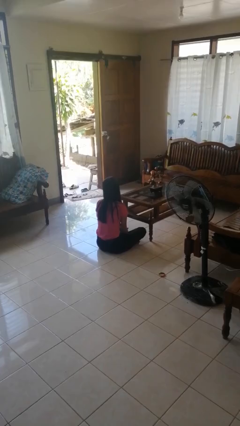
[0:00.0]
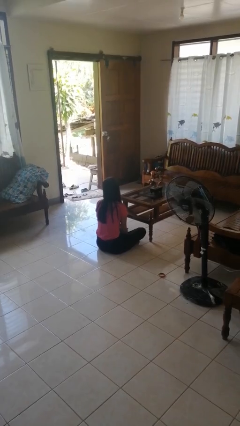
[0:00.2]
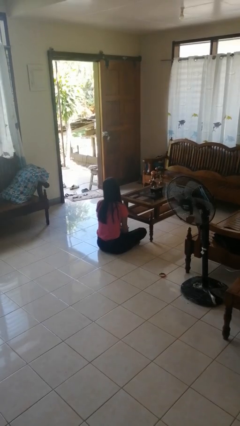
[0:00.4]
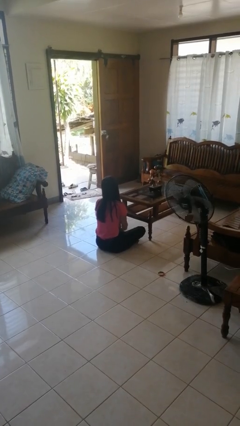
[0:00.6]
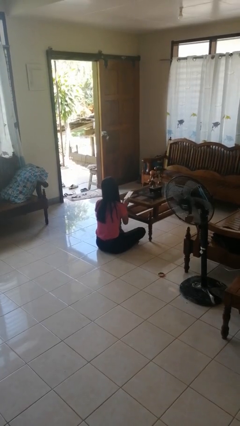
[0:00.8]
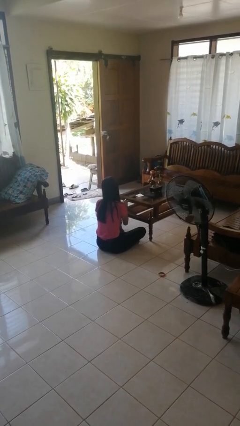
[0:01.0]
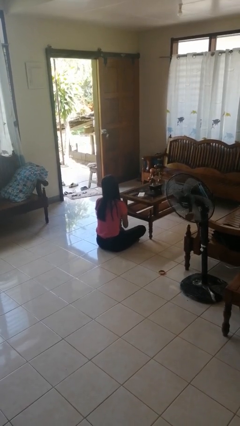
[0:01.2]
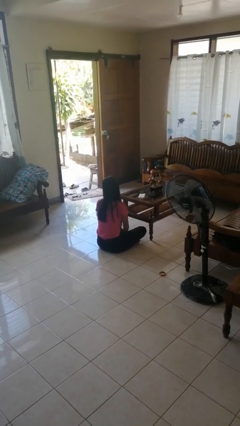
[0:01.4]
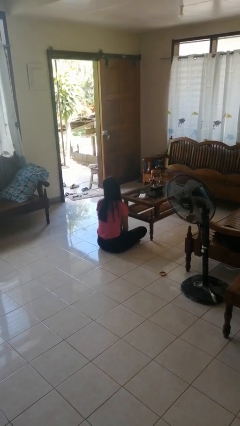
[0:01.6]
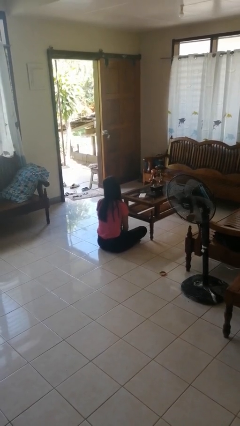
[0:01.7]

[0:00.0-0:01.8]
person throws object on table

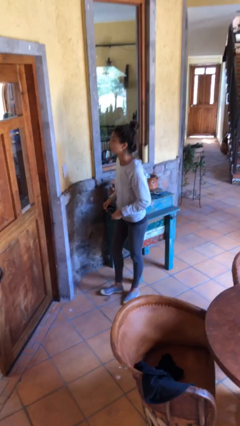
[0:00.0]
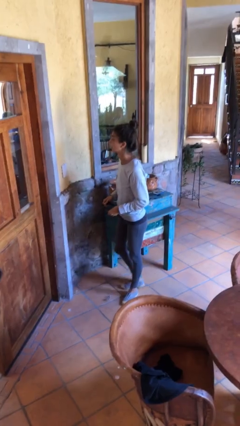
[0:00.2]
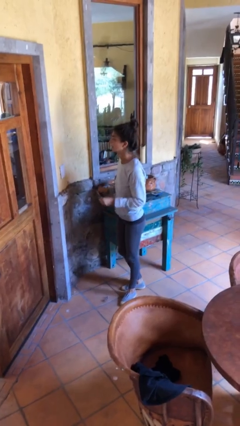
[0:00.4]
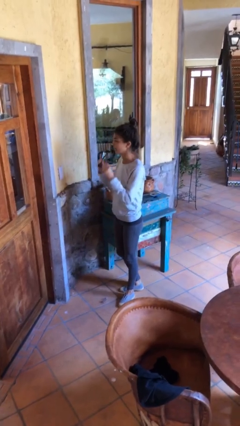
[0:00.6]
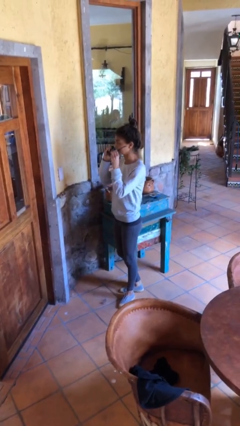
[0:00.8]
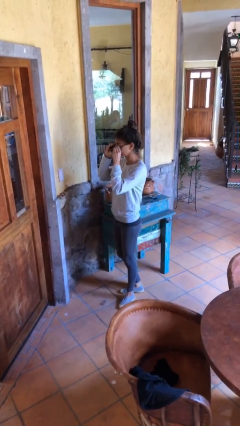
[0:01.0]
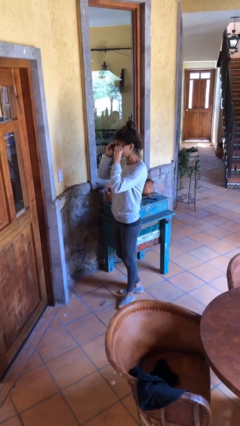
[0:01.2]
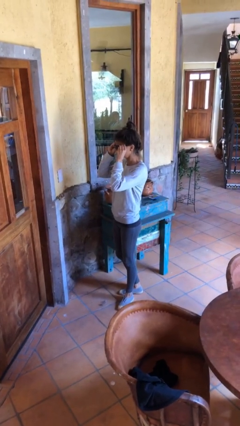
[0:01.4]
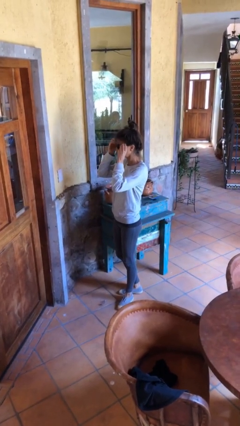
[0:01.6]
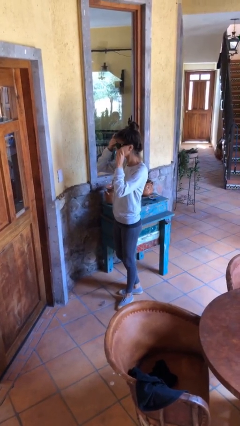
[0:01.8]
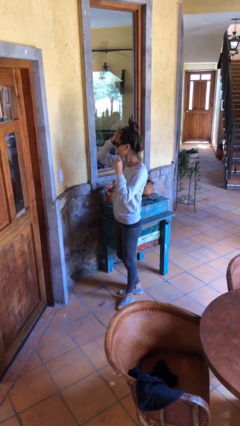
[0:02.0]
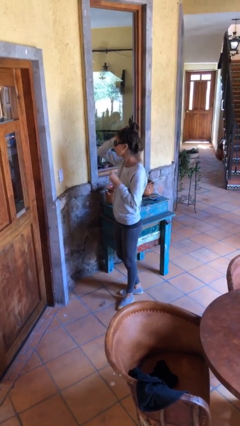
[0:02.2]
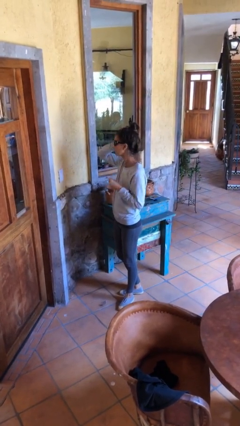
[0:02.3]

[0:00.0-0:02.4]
person puts on sunglasses

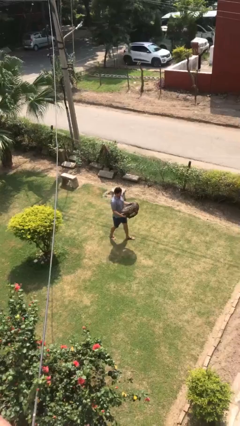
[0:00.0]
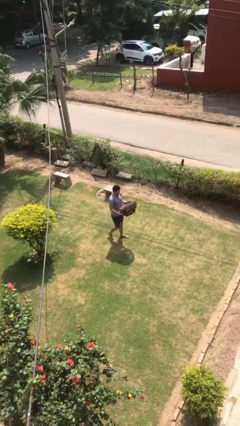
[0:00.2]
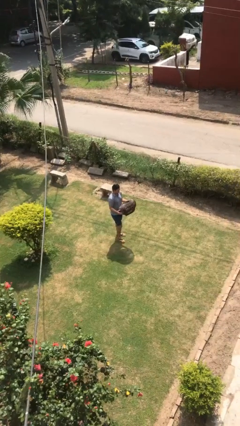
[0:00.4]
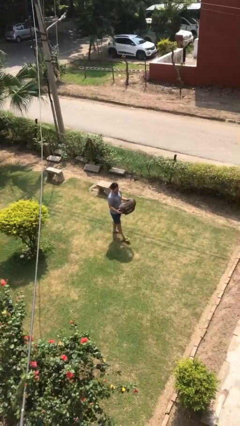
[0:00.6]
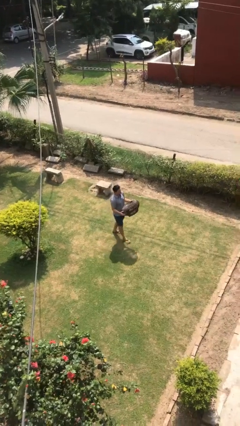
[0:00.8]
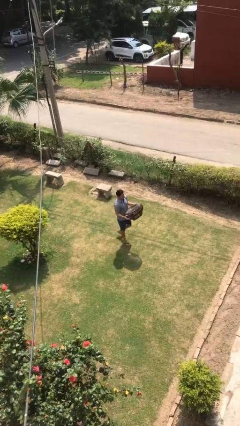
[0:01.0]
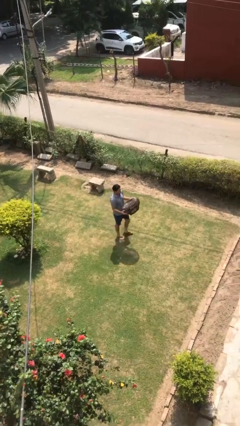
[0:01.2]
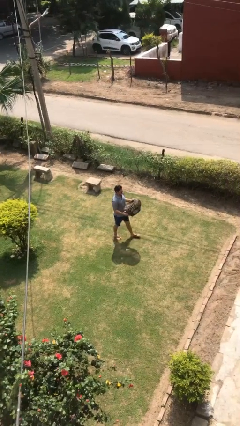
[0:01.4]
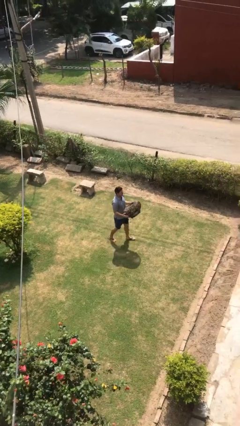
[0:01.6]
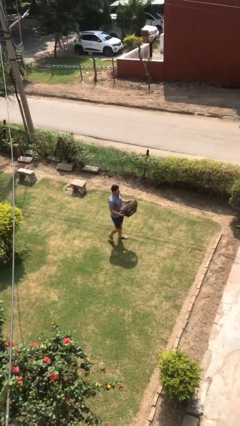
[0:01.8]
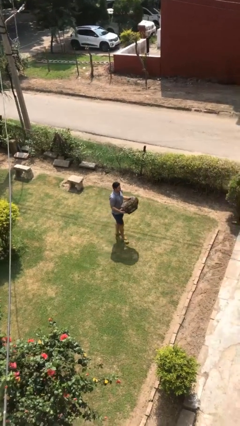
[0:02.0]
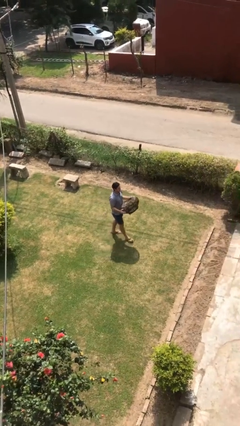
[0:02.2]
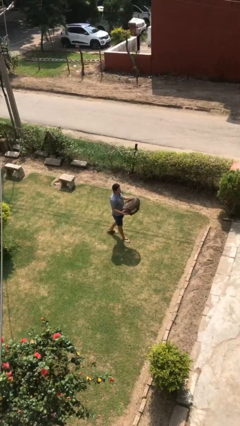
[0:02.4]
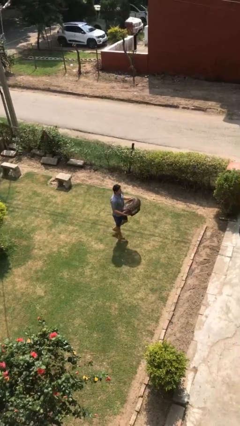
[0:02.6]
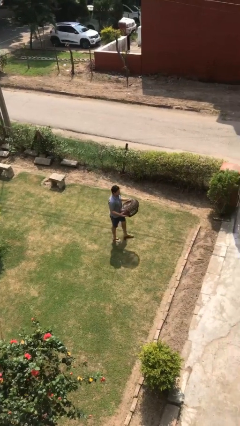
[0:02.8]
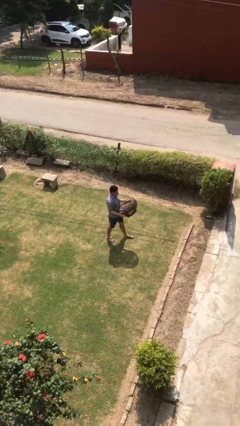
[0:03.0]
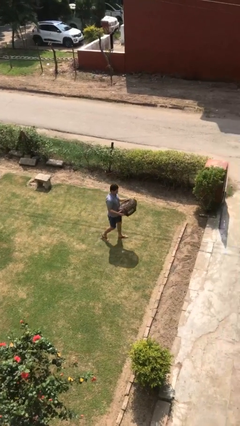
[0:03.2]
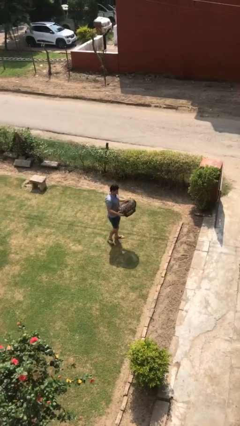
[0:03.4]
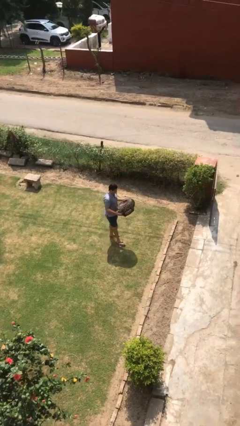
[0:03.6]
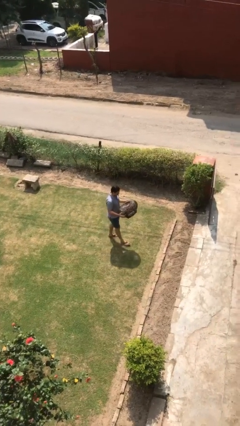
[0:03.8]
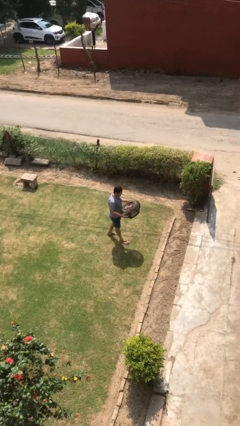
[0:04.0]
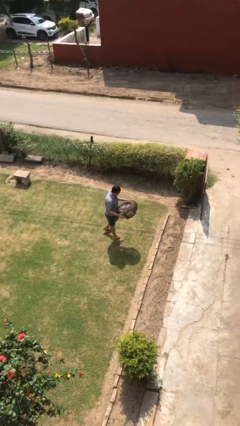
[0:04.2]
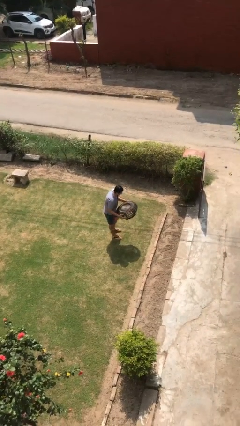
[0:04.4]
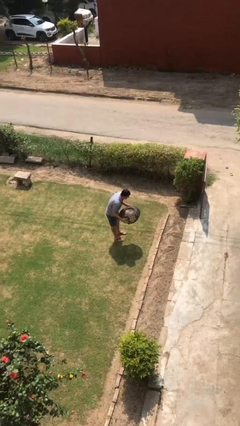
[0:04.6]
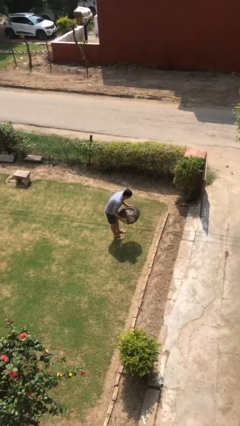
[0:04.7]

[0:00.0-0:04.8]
person carries heavy object

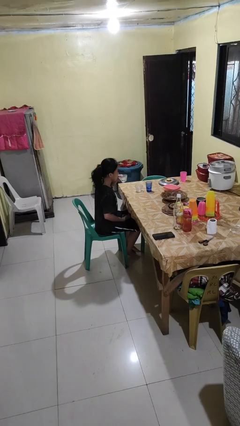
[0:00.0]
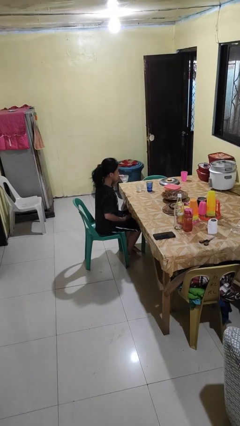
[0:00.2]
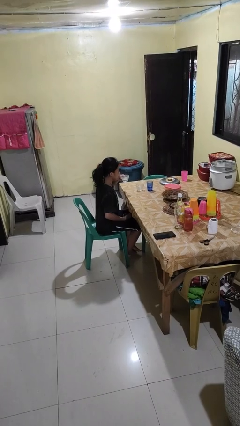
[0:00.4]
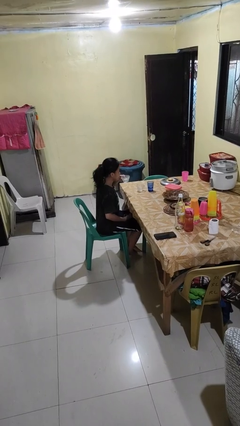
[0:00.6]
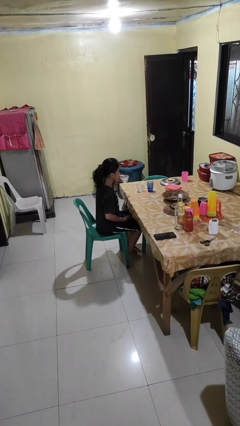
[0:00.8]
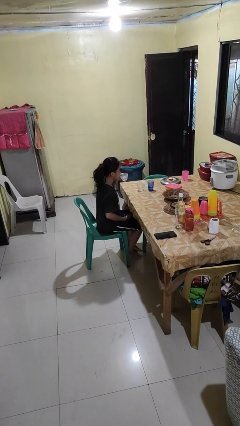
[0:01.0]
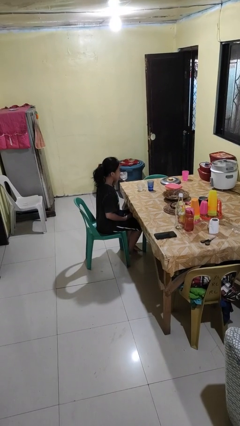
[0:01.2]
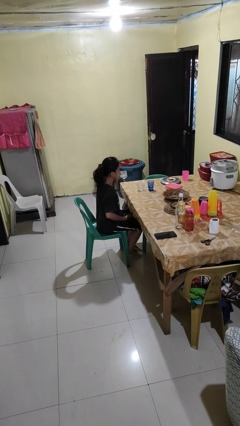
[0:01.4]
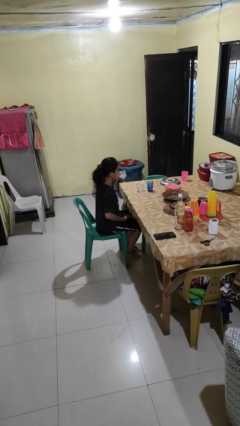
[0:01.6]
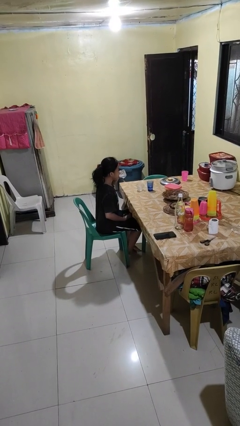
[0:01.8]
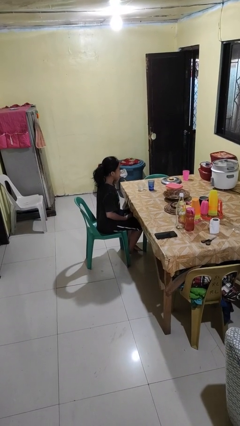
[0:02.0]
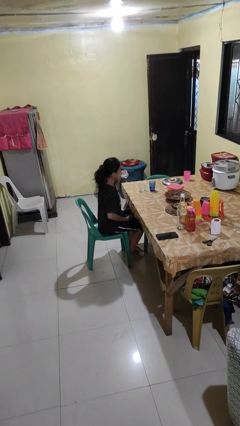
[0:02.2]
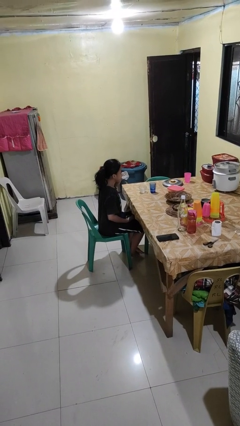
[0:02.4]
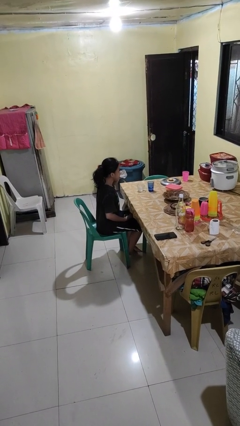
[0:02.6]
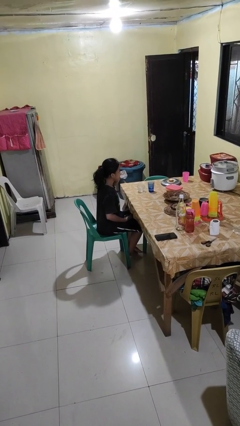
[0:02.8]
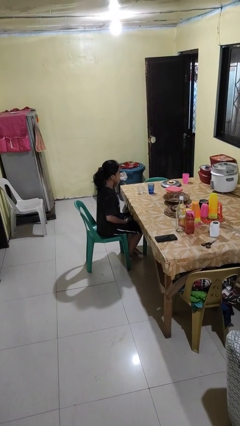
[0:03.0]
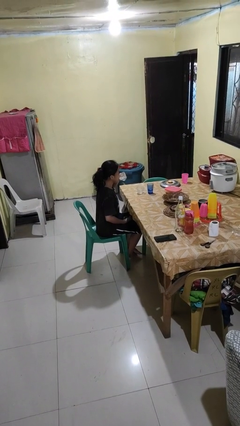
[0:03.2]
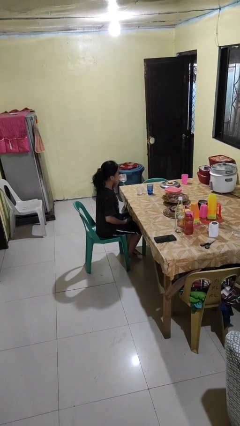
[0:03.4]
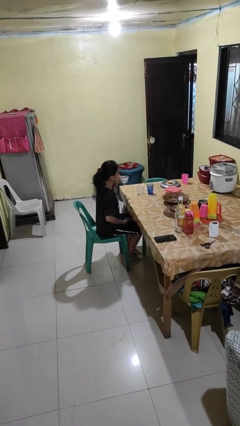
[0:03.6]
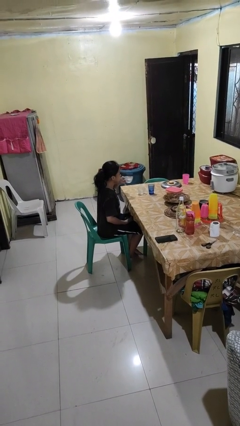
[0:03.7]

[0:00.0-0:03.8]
person drinks from shotglass

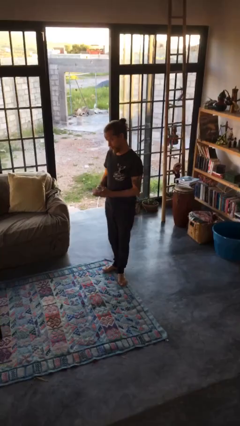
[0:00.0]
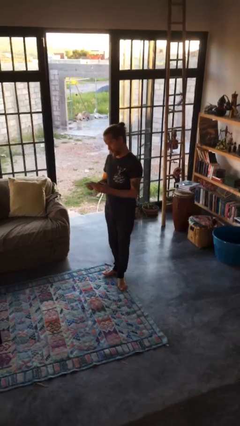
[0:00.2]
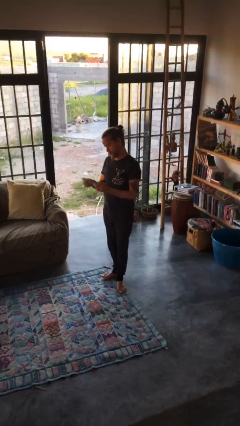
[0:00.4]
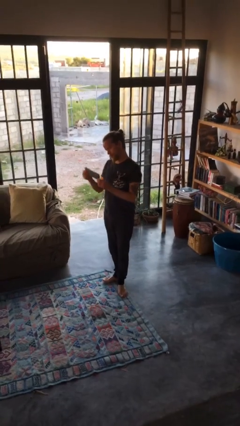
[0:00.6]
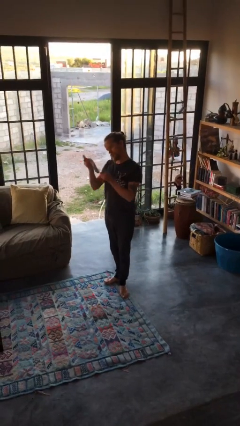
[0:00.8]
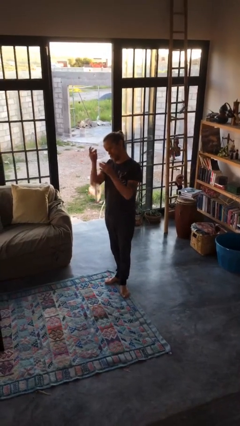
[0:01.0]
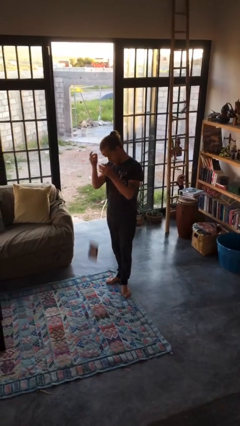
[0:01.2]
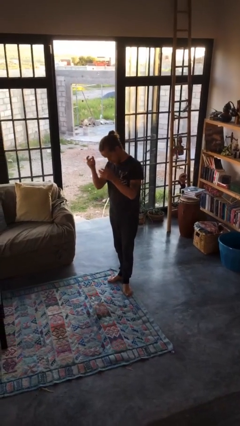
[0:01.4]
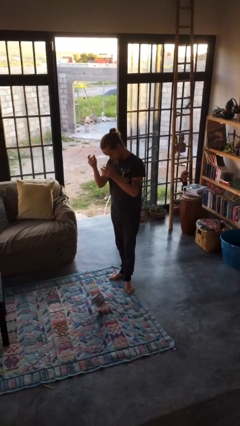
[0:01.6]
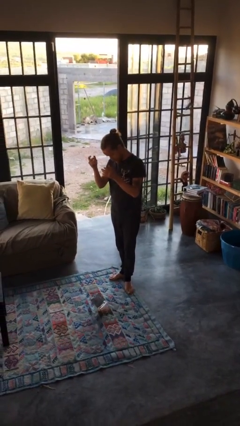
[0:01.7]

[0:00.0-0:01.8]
person drops object

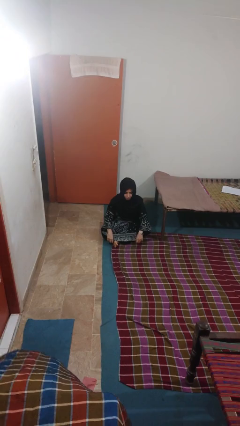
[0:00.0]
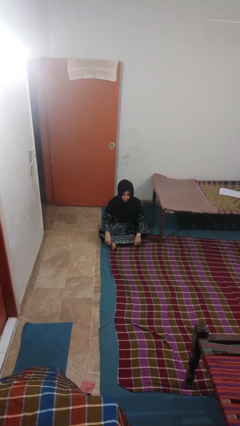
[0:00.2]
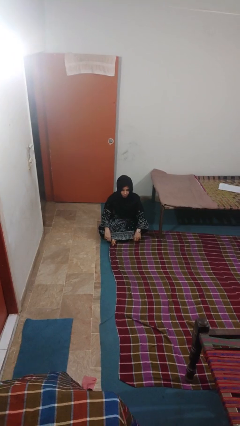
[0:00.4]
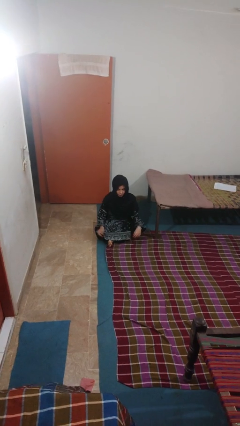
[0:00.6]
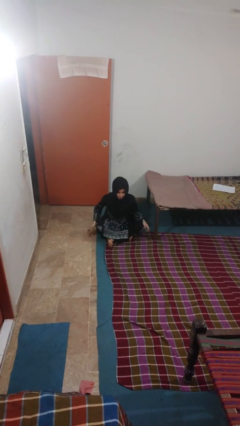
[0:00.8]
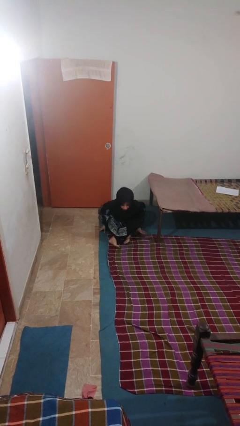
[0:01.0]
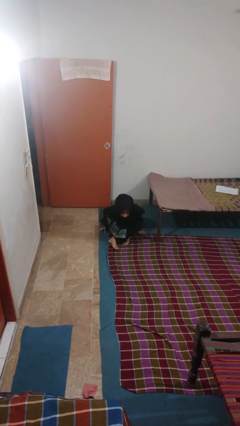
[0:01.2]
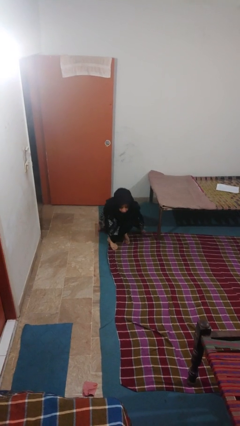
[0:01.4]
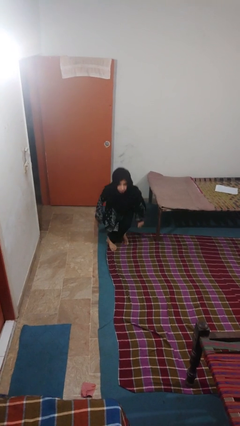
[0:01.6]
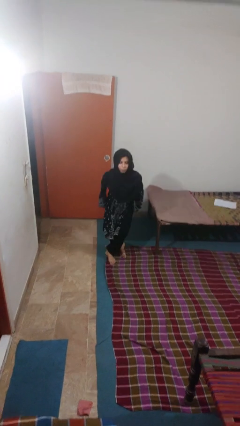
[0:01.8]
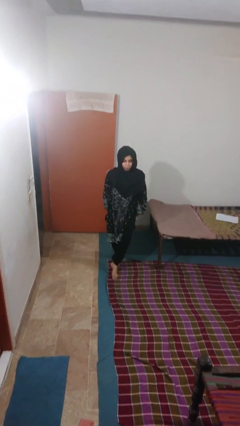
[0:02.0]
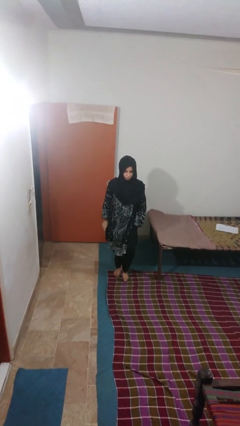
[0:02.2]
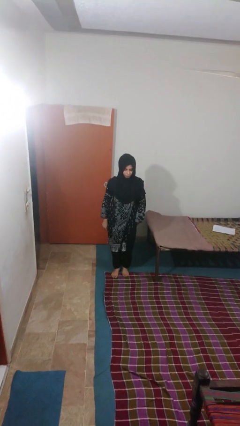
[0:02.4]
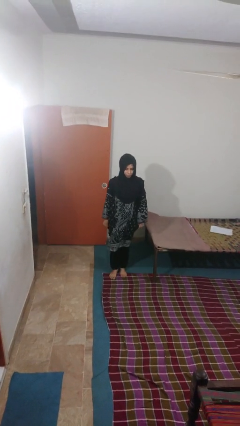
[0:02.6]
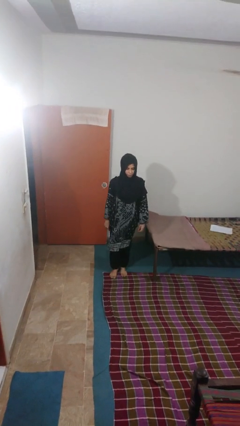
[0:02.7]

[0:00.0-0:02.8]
person stands up from floor

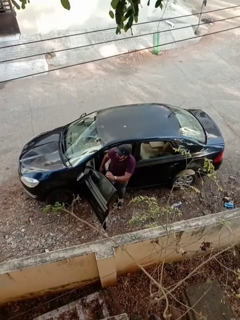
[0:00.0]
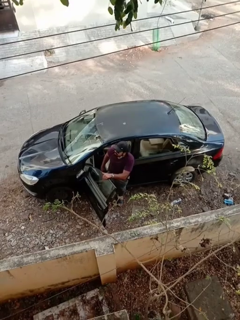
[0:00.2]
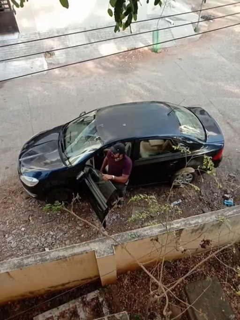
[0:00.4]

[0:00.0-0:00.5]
person exits car
